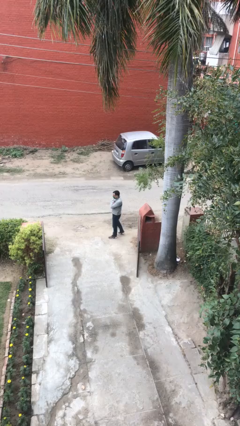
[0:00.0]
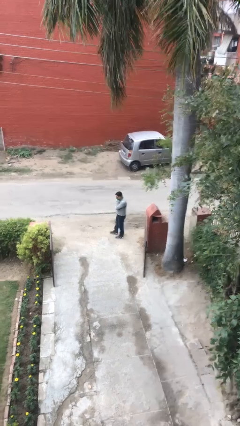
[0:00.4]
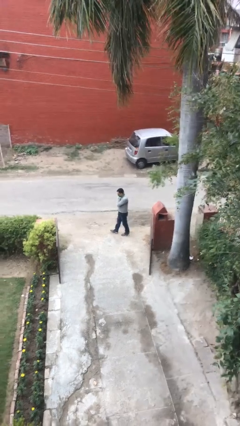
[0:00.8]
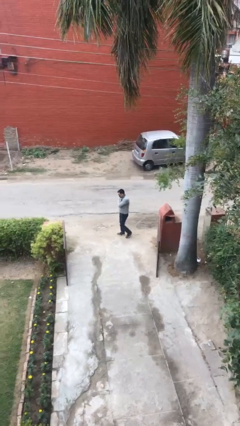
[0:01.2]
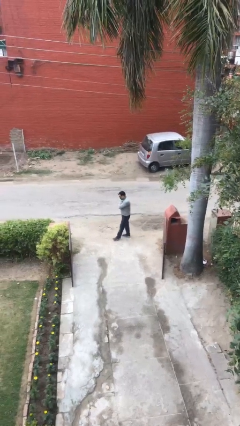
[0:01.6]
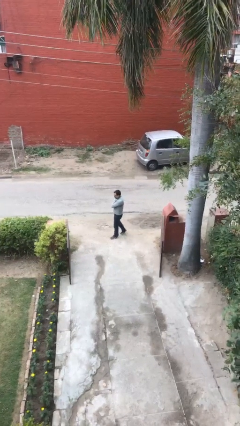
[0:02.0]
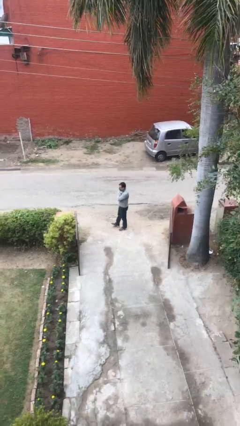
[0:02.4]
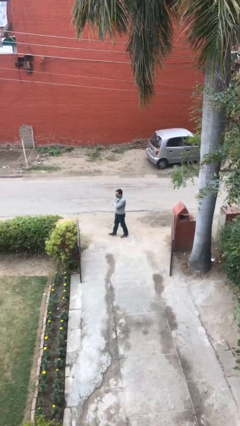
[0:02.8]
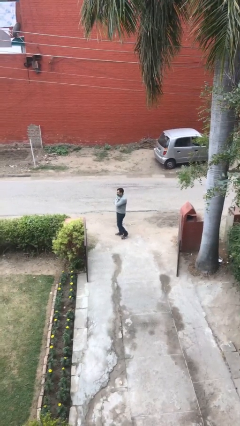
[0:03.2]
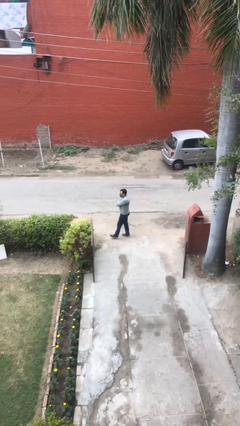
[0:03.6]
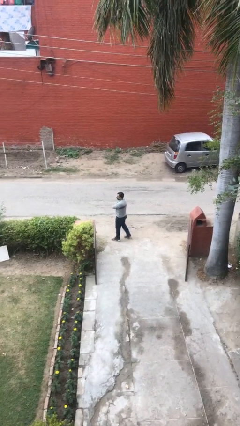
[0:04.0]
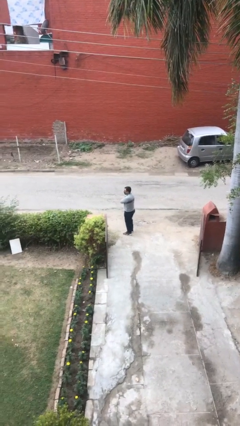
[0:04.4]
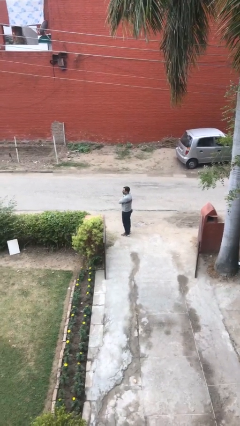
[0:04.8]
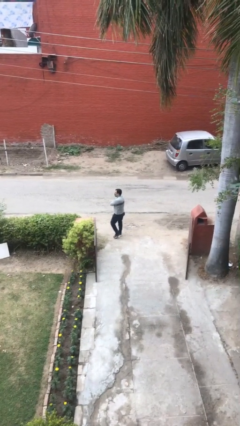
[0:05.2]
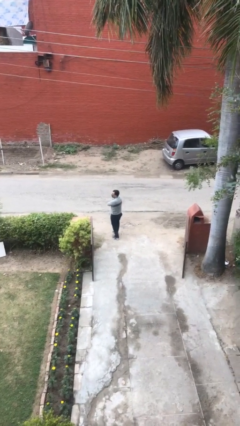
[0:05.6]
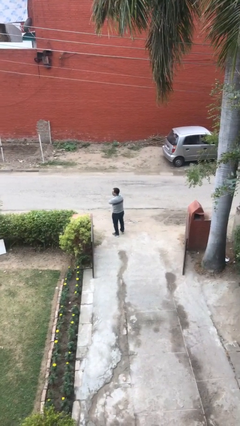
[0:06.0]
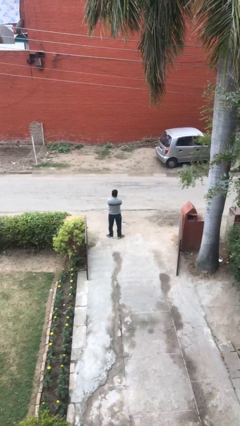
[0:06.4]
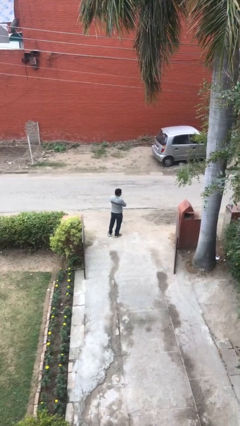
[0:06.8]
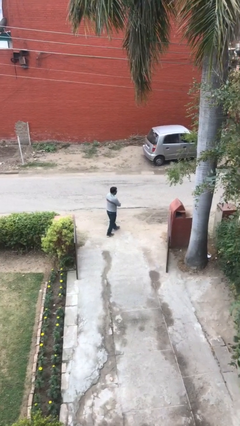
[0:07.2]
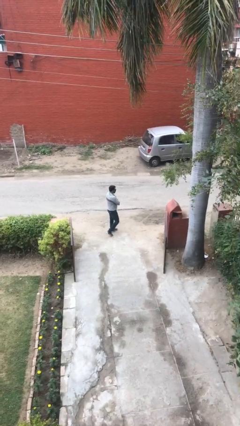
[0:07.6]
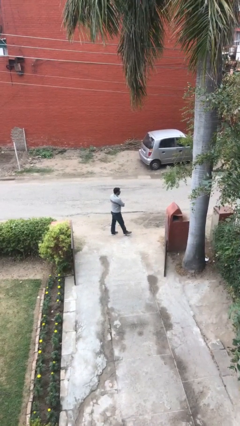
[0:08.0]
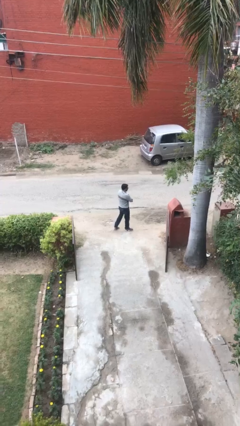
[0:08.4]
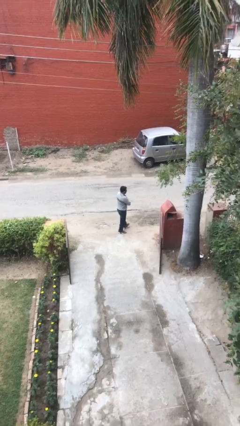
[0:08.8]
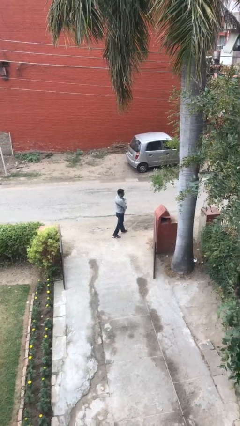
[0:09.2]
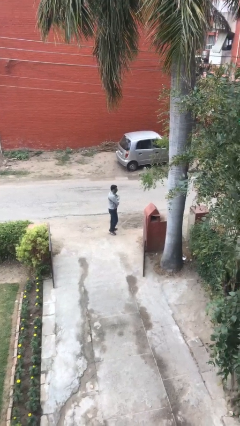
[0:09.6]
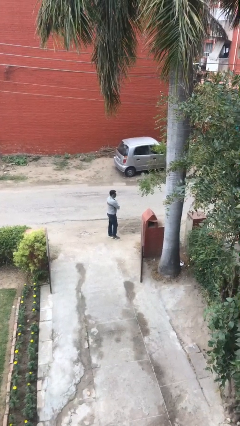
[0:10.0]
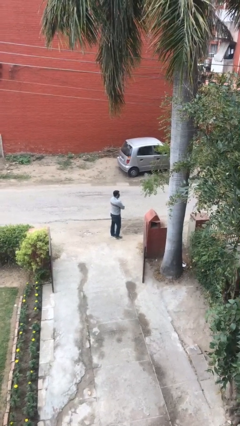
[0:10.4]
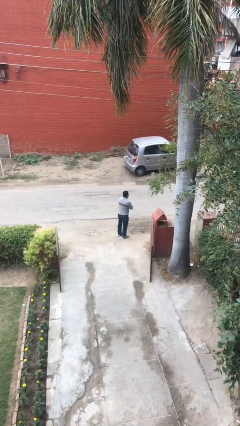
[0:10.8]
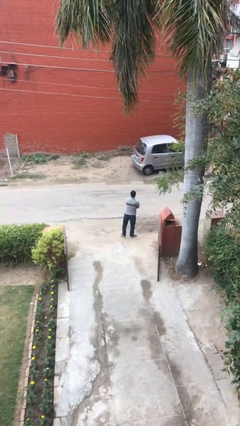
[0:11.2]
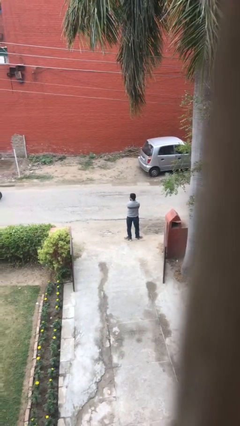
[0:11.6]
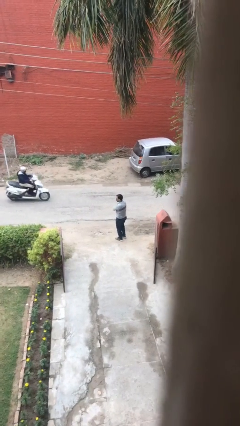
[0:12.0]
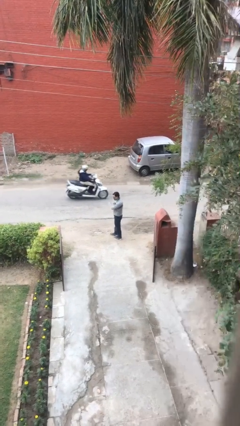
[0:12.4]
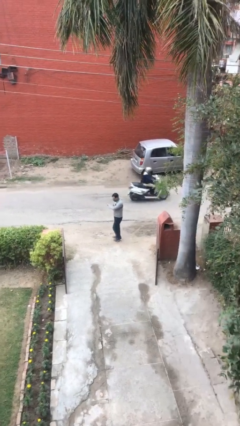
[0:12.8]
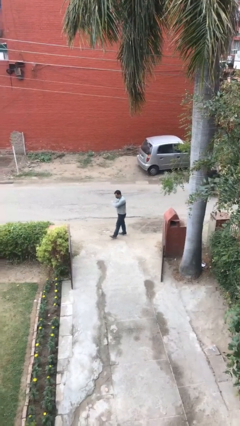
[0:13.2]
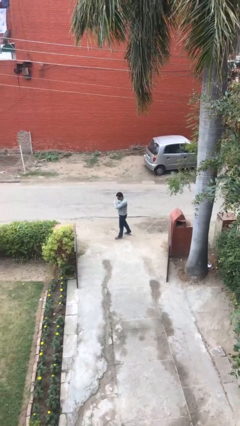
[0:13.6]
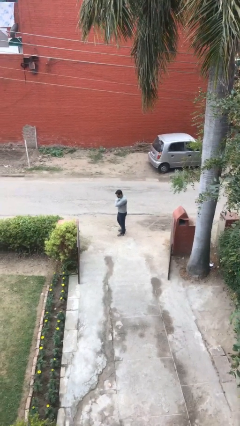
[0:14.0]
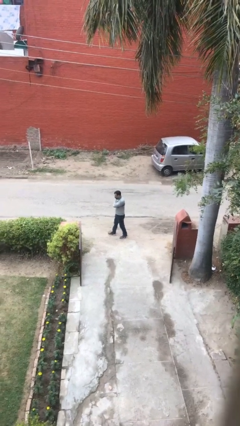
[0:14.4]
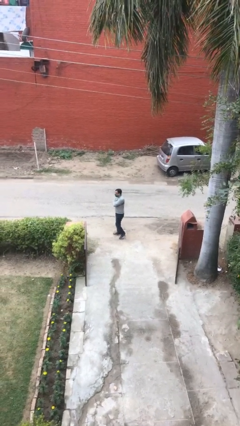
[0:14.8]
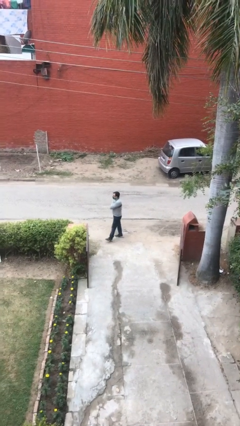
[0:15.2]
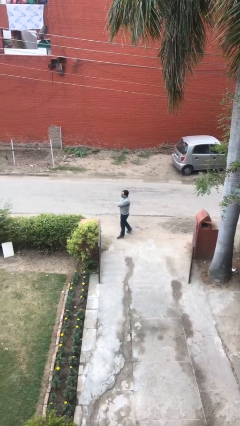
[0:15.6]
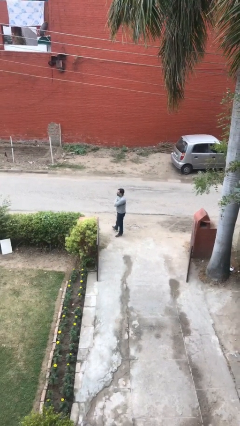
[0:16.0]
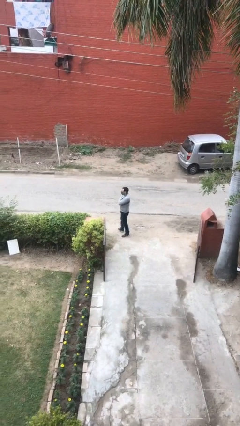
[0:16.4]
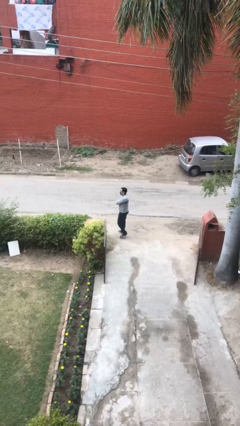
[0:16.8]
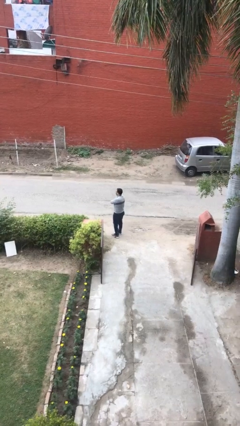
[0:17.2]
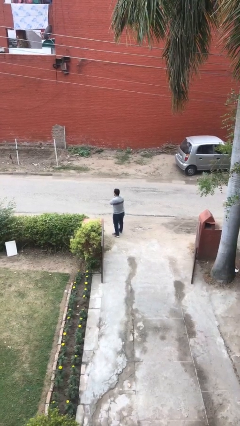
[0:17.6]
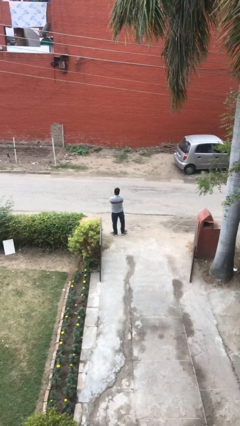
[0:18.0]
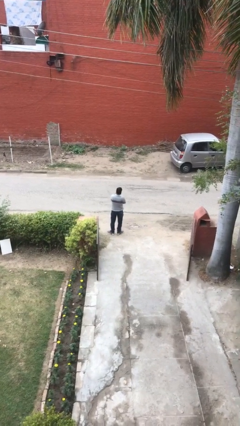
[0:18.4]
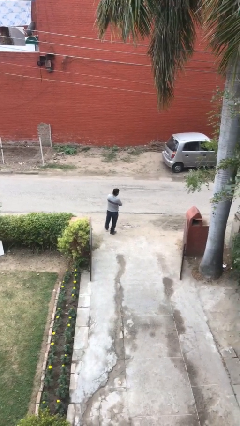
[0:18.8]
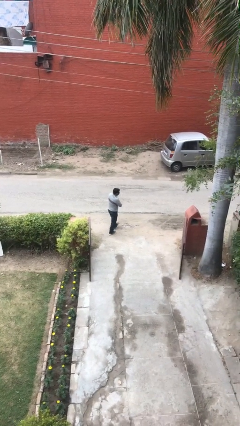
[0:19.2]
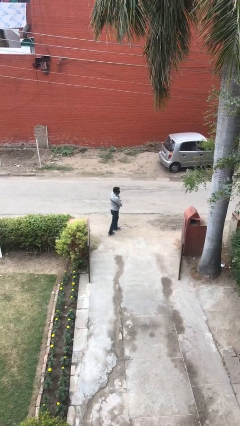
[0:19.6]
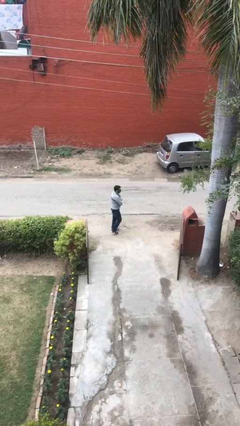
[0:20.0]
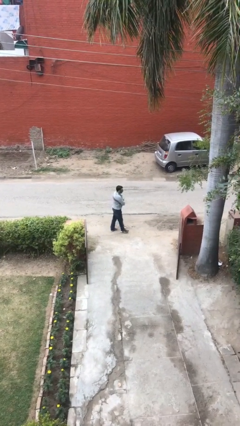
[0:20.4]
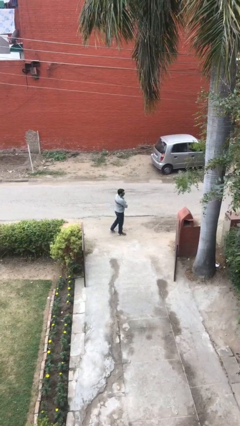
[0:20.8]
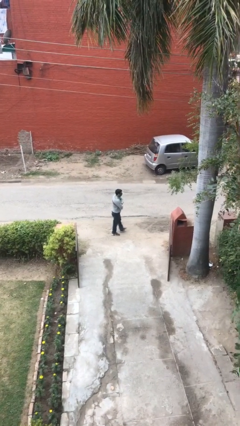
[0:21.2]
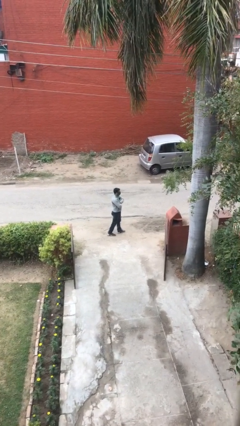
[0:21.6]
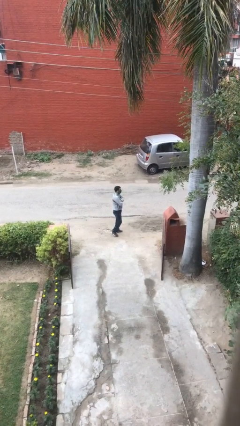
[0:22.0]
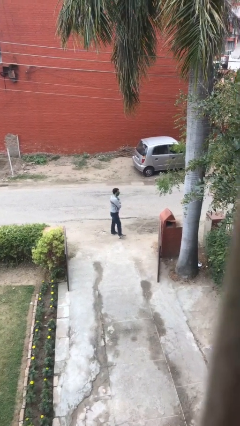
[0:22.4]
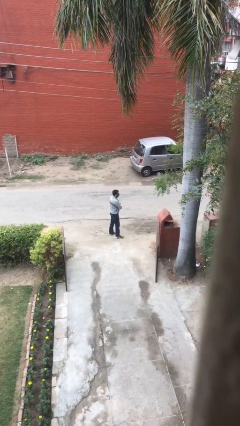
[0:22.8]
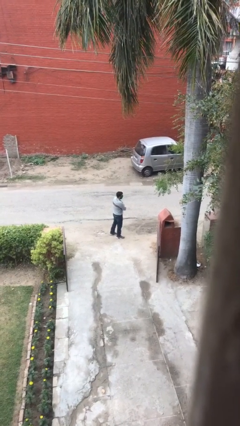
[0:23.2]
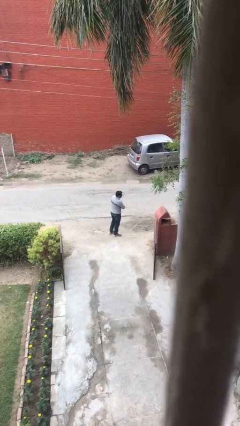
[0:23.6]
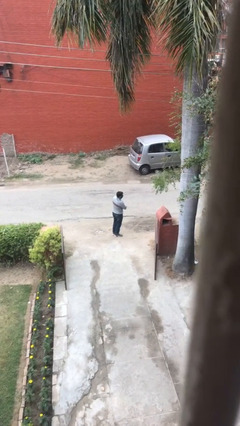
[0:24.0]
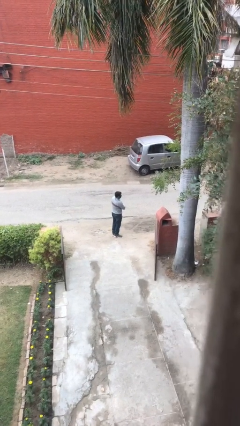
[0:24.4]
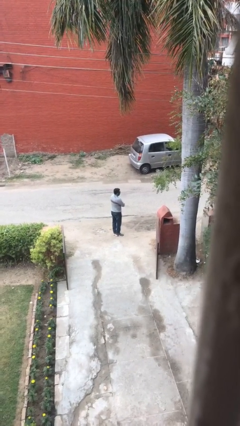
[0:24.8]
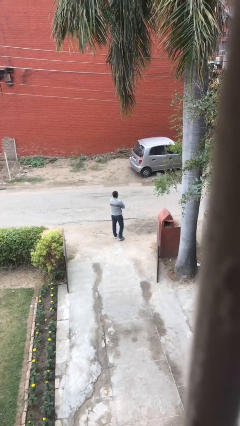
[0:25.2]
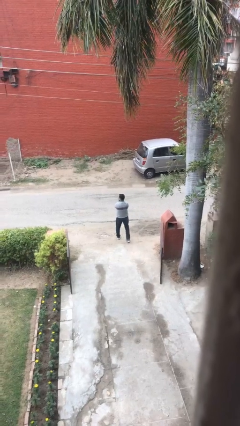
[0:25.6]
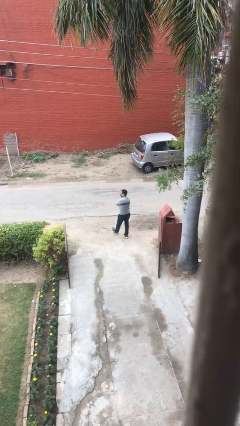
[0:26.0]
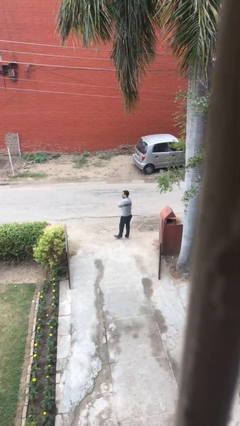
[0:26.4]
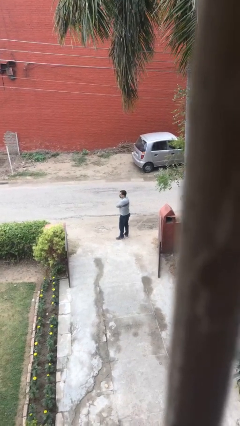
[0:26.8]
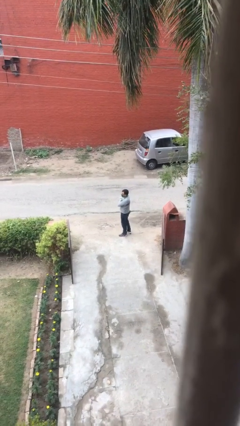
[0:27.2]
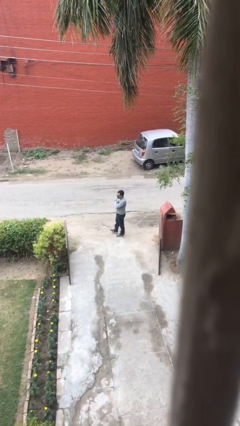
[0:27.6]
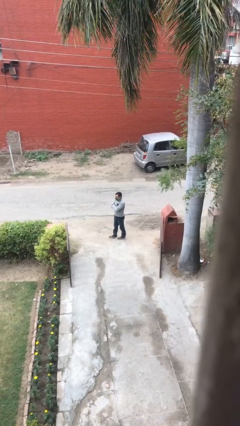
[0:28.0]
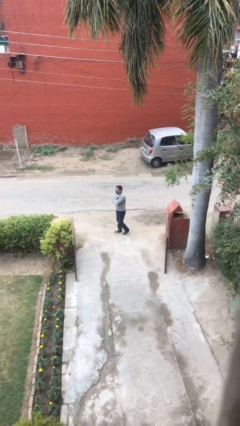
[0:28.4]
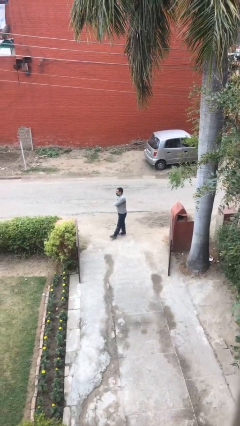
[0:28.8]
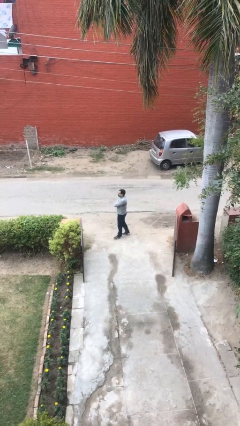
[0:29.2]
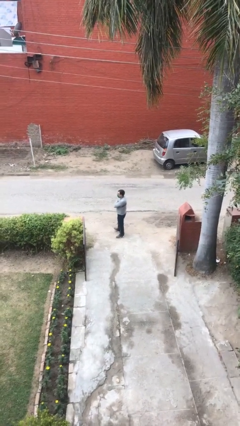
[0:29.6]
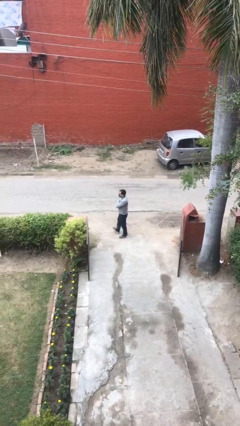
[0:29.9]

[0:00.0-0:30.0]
person walks

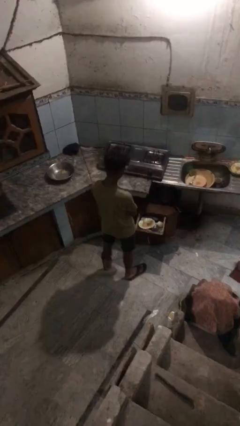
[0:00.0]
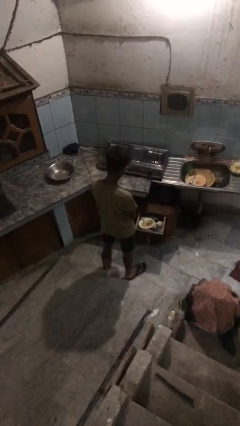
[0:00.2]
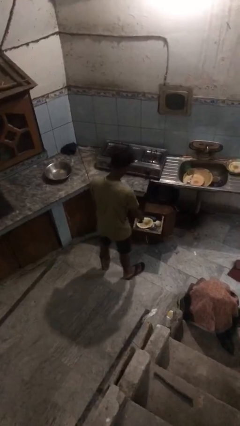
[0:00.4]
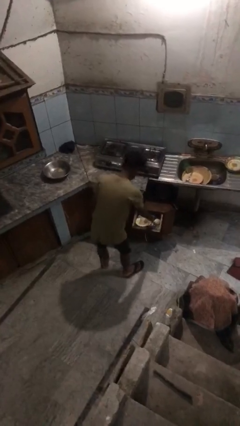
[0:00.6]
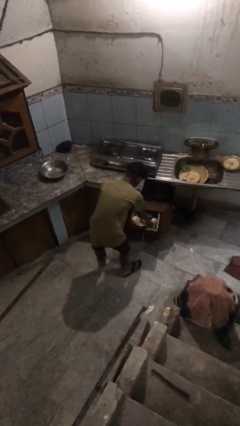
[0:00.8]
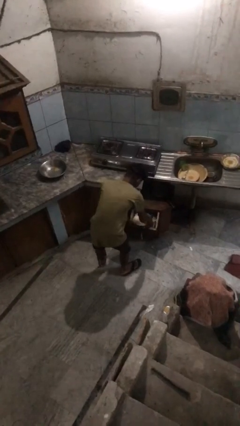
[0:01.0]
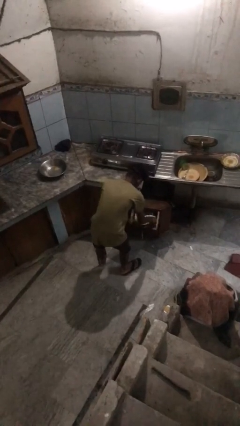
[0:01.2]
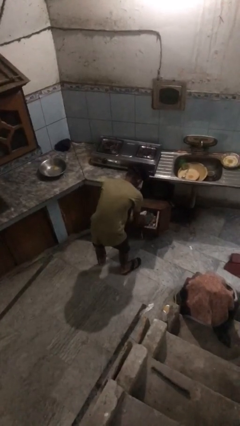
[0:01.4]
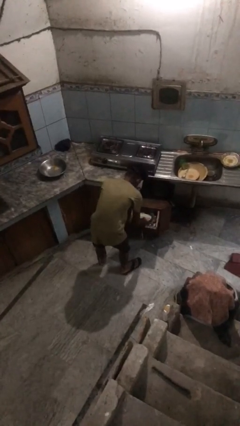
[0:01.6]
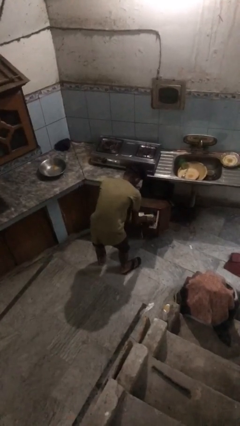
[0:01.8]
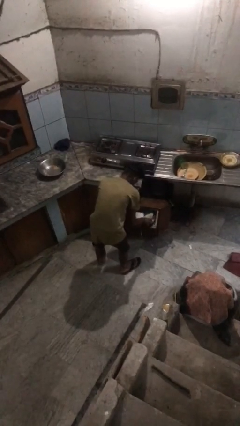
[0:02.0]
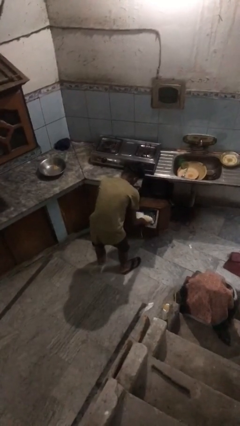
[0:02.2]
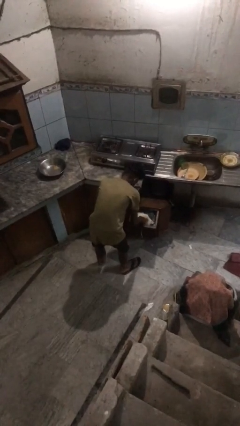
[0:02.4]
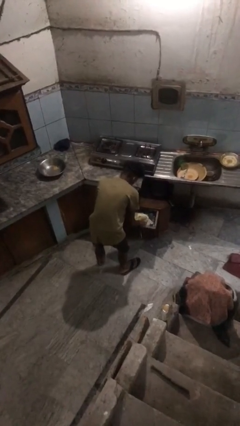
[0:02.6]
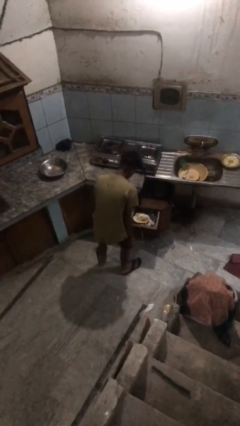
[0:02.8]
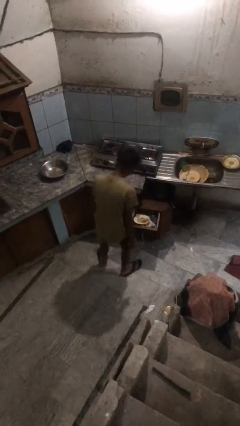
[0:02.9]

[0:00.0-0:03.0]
person searches in kitchen drawer
